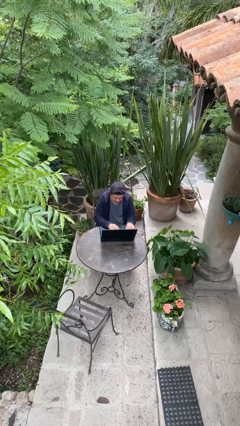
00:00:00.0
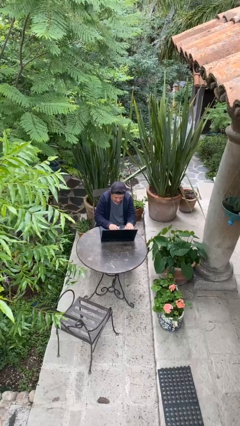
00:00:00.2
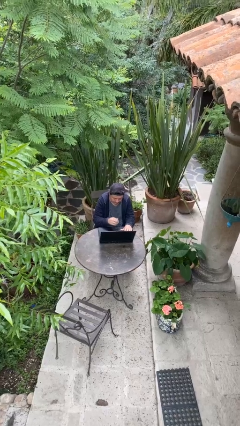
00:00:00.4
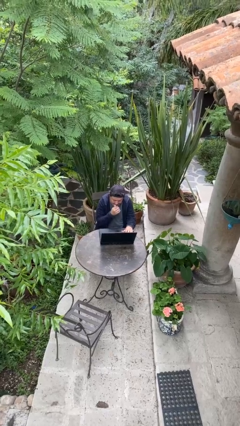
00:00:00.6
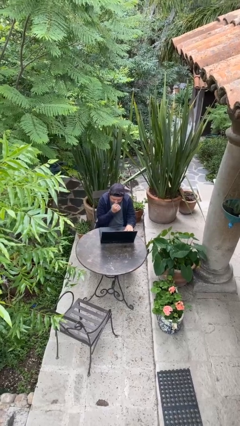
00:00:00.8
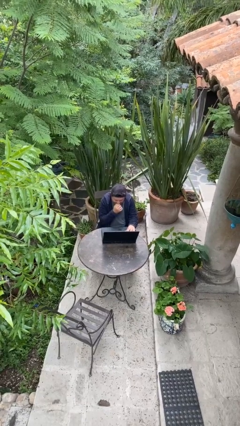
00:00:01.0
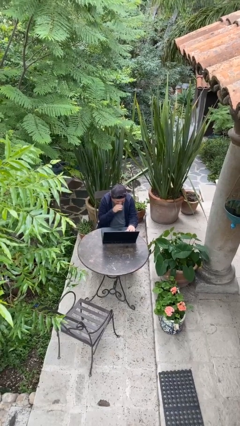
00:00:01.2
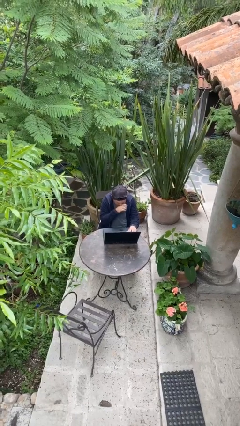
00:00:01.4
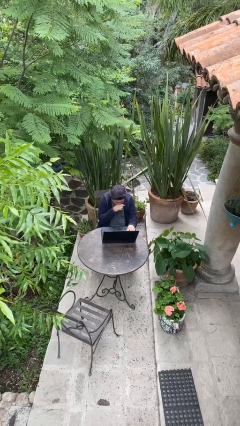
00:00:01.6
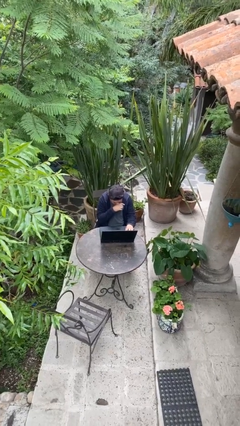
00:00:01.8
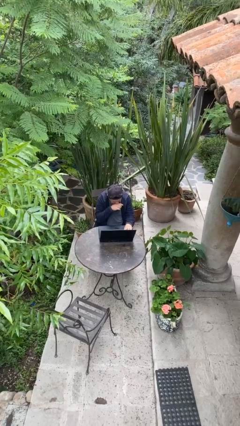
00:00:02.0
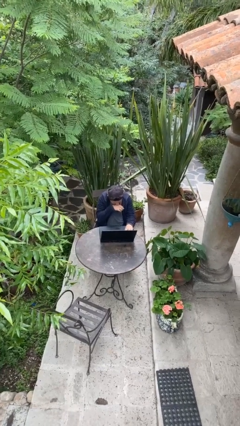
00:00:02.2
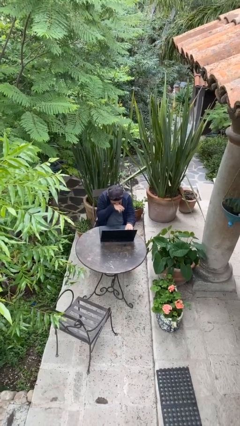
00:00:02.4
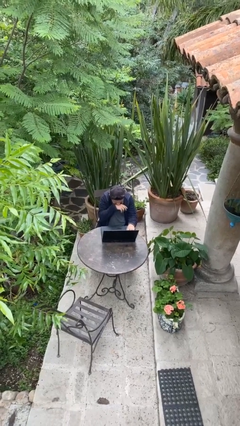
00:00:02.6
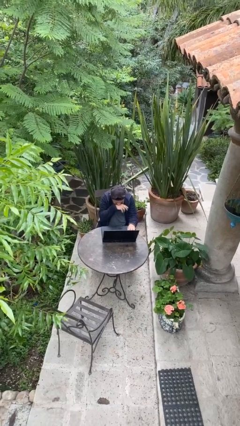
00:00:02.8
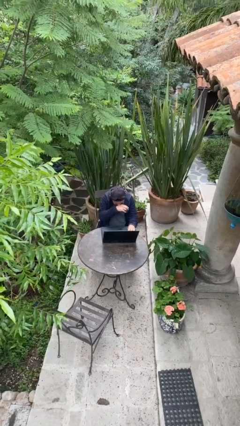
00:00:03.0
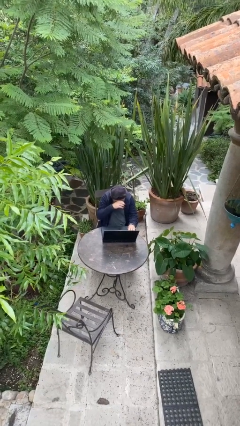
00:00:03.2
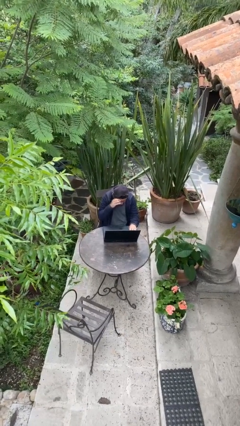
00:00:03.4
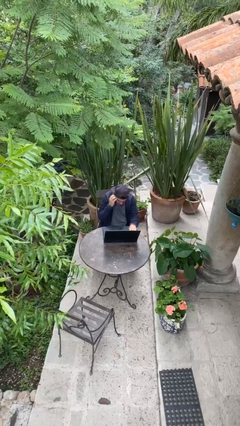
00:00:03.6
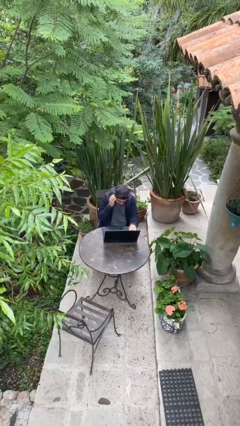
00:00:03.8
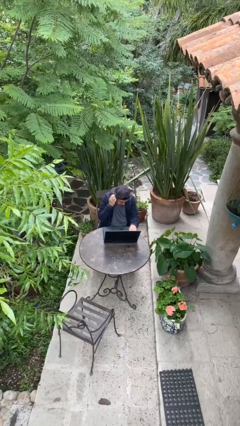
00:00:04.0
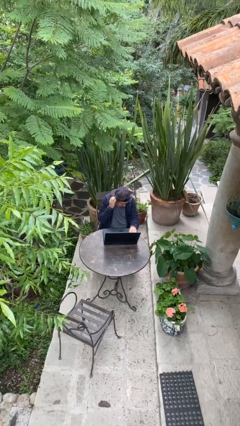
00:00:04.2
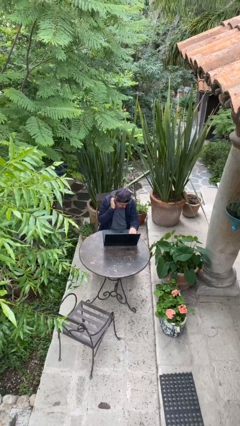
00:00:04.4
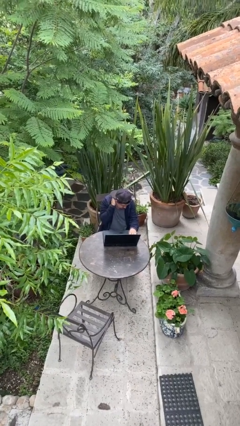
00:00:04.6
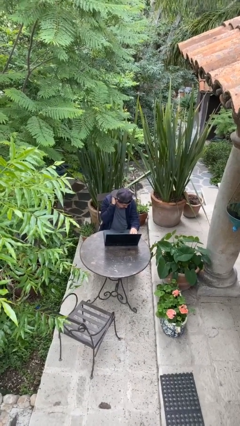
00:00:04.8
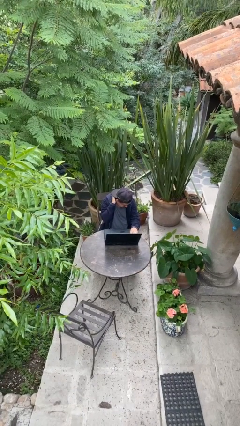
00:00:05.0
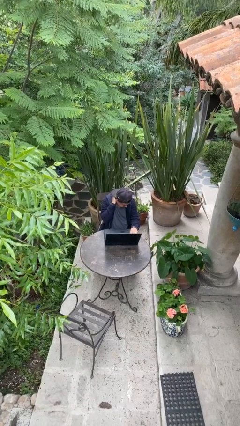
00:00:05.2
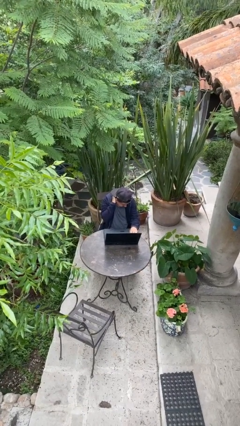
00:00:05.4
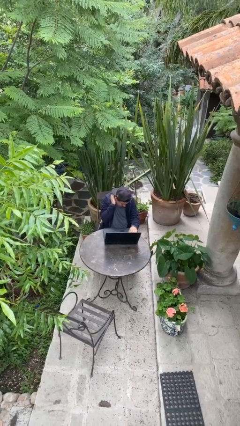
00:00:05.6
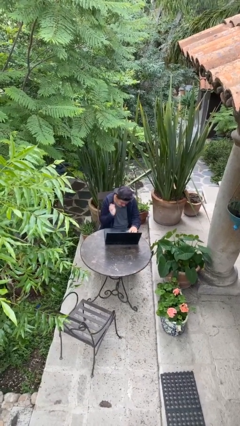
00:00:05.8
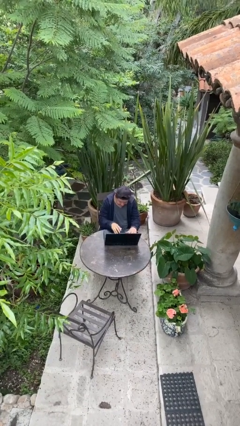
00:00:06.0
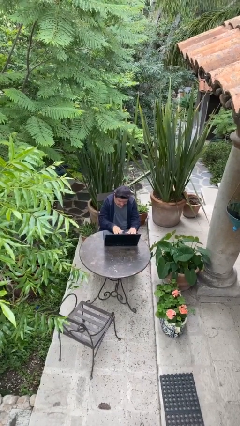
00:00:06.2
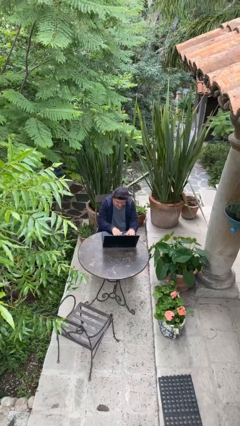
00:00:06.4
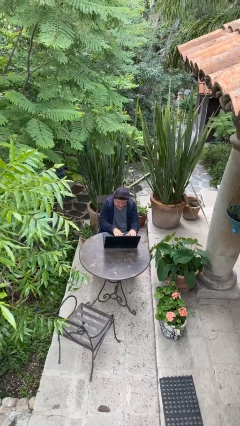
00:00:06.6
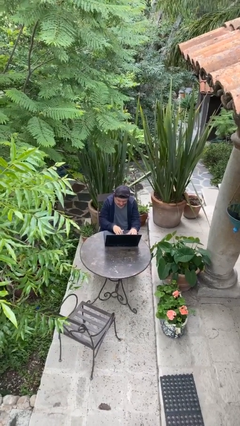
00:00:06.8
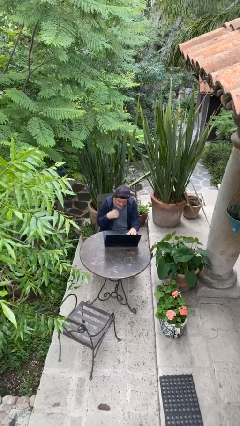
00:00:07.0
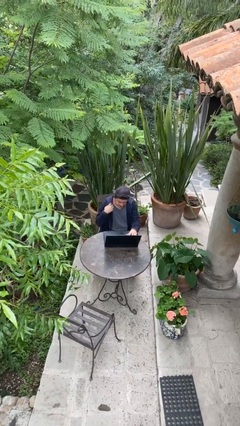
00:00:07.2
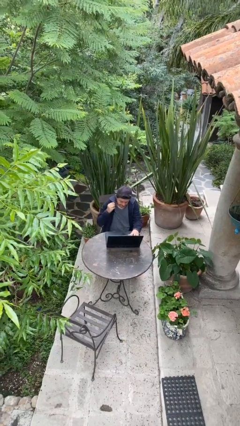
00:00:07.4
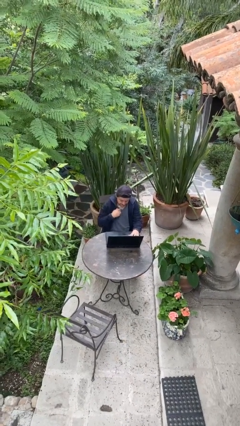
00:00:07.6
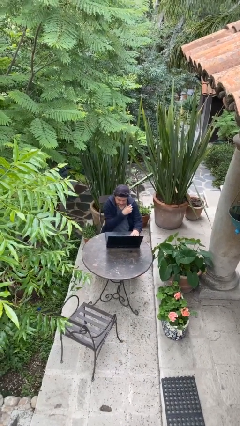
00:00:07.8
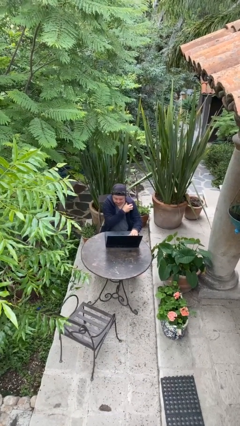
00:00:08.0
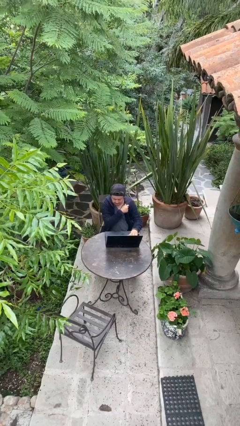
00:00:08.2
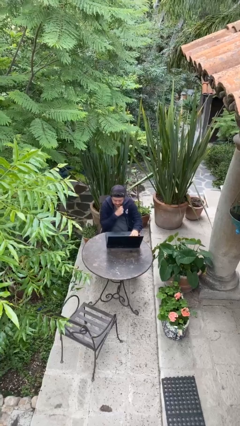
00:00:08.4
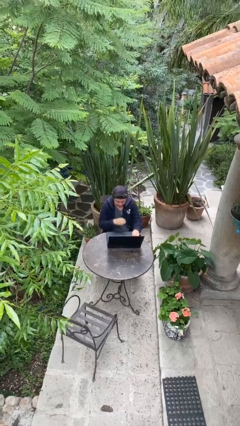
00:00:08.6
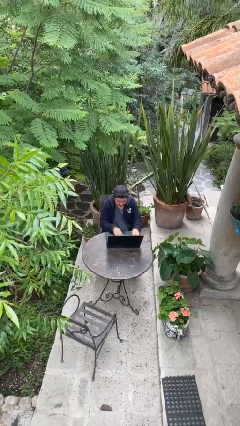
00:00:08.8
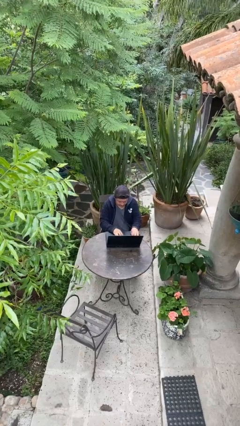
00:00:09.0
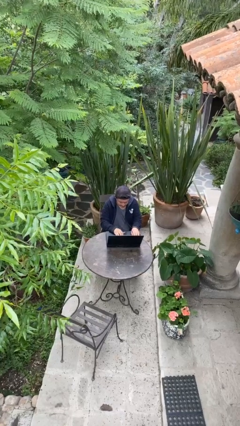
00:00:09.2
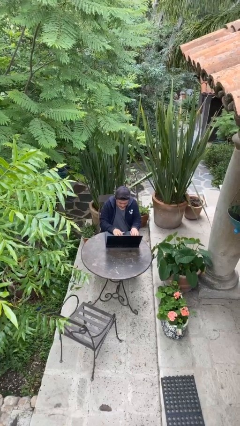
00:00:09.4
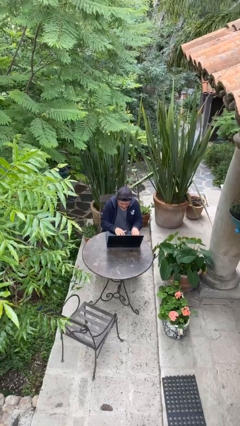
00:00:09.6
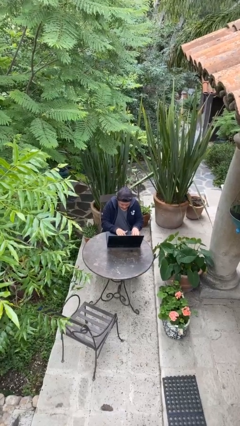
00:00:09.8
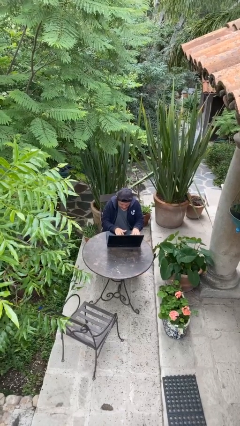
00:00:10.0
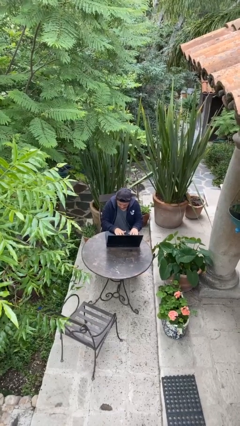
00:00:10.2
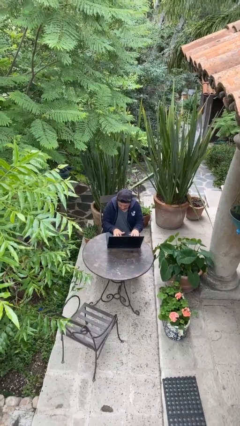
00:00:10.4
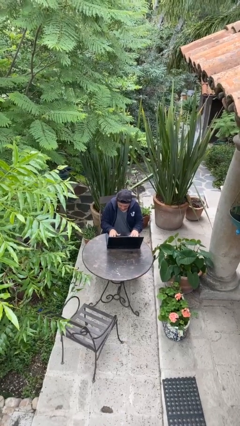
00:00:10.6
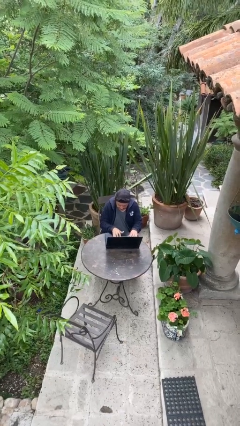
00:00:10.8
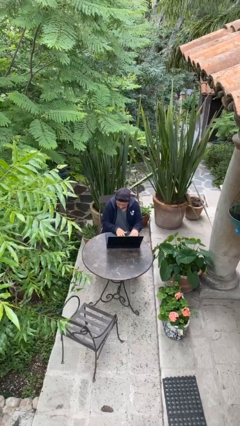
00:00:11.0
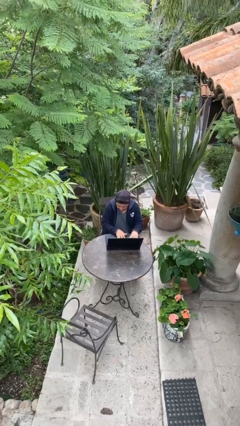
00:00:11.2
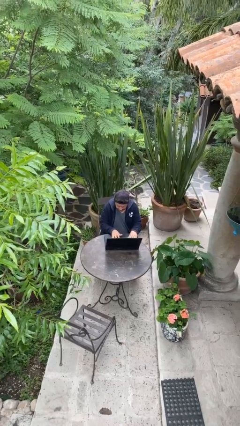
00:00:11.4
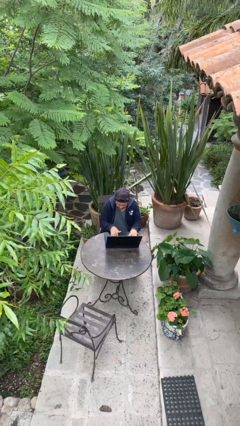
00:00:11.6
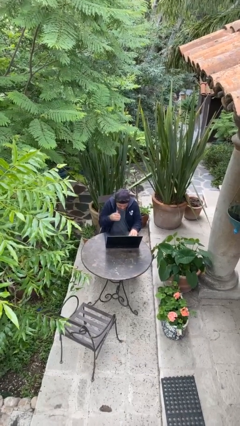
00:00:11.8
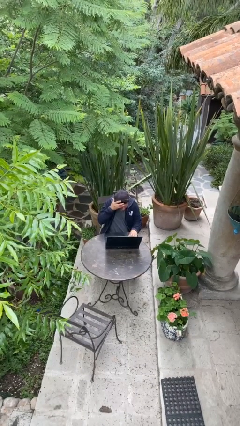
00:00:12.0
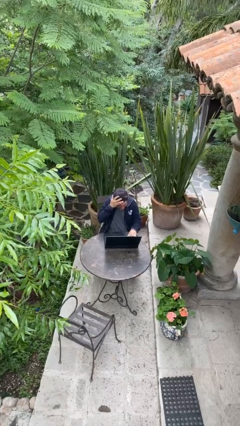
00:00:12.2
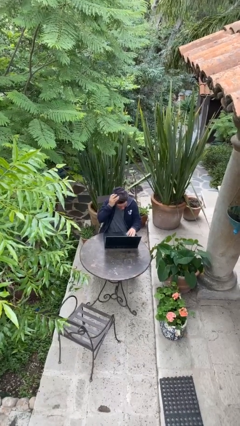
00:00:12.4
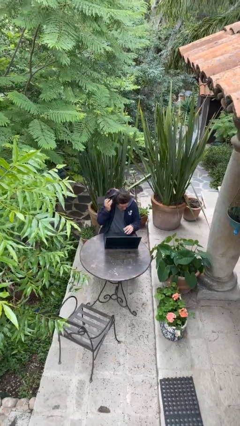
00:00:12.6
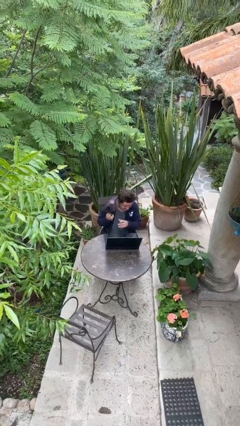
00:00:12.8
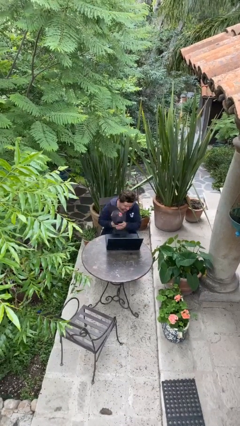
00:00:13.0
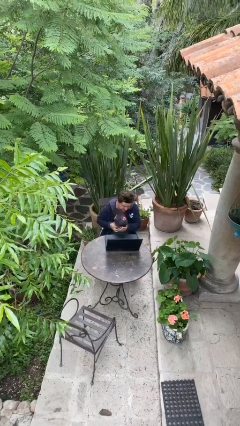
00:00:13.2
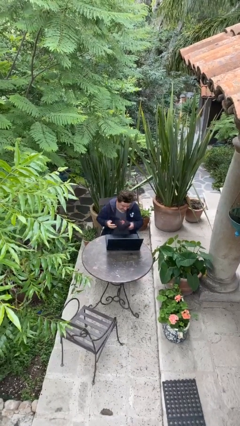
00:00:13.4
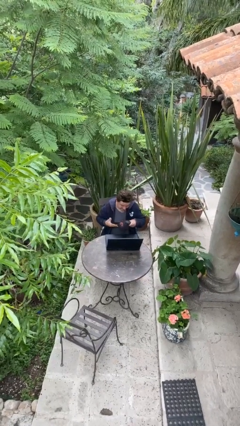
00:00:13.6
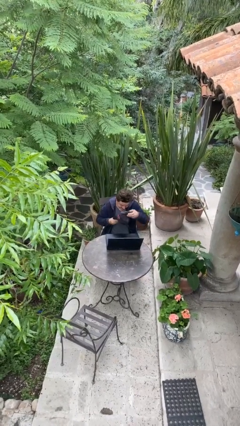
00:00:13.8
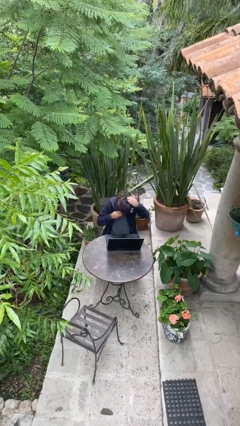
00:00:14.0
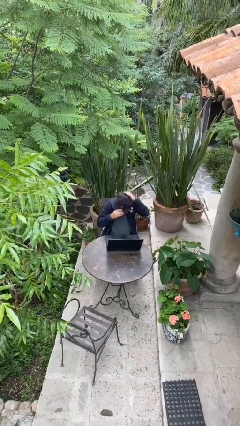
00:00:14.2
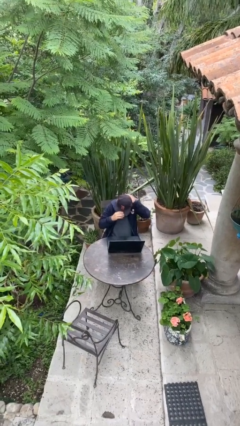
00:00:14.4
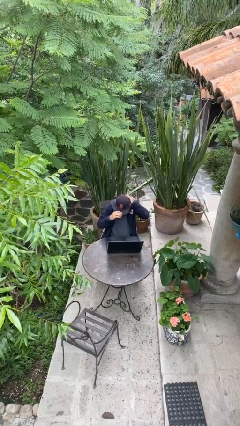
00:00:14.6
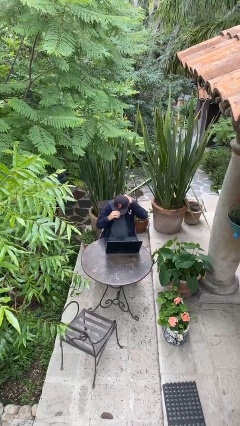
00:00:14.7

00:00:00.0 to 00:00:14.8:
person interacts with laptop

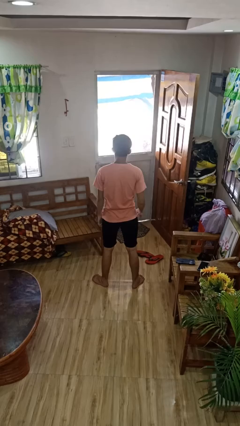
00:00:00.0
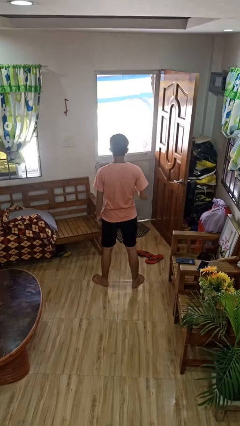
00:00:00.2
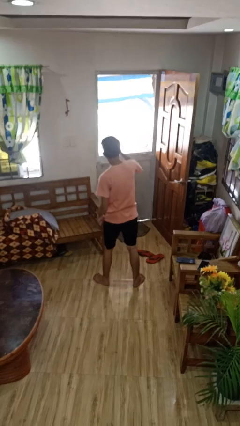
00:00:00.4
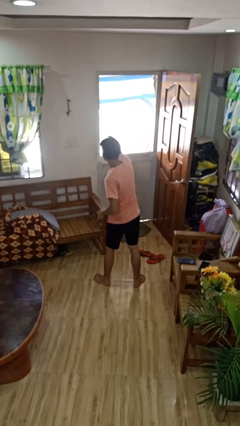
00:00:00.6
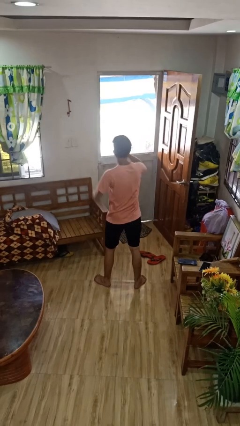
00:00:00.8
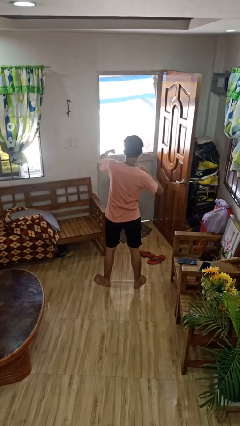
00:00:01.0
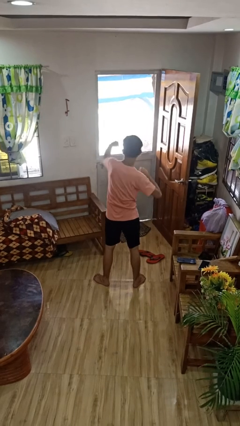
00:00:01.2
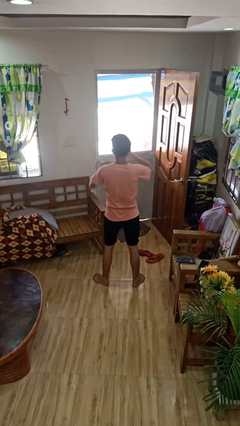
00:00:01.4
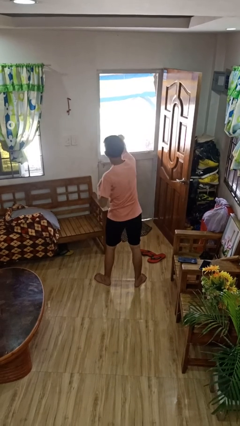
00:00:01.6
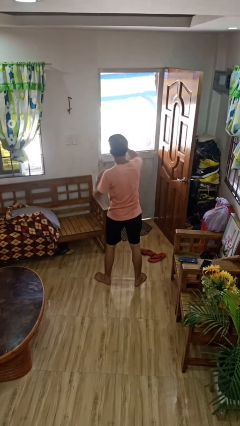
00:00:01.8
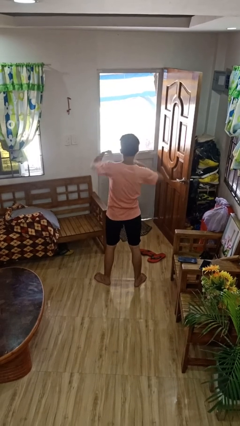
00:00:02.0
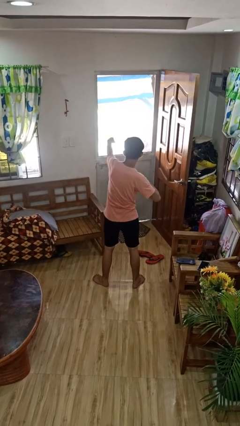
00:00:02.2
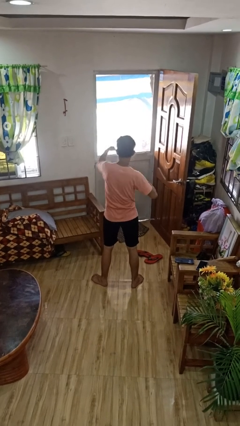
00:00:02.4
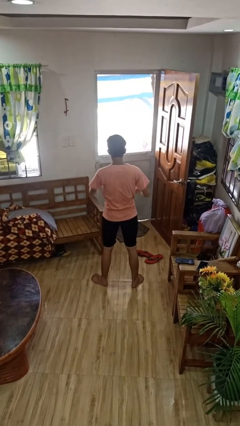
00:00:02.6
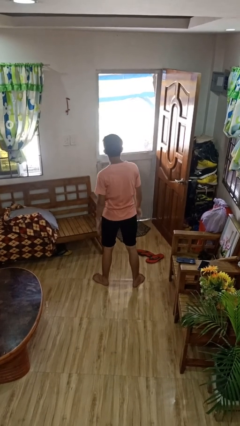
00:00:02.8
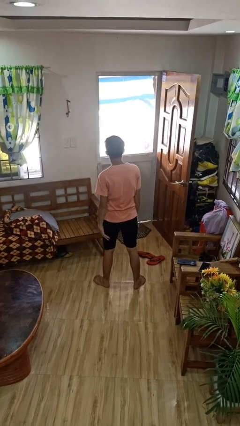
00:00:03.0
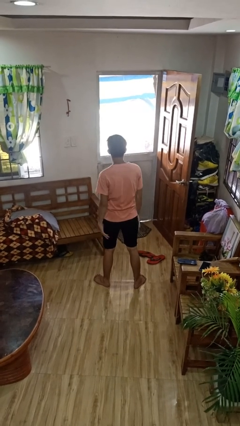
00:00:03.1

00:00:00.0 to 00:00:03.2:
person punches
